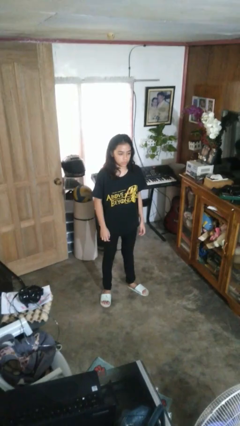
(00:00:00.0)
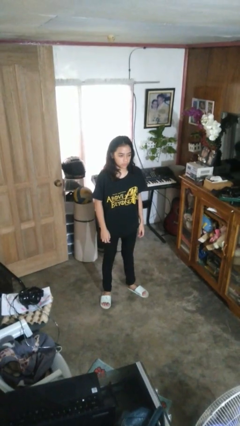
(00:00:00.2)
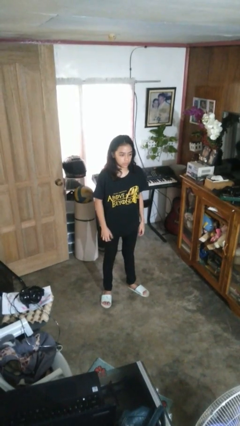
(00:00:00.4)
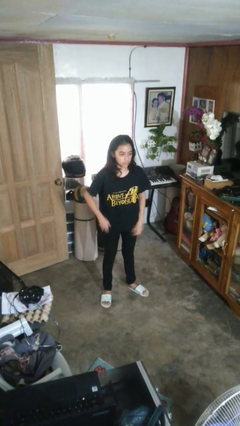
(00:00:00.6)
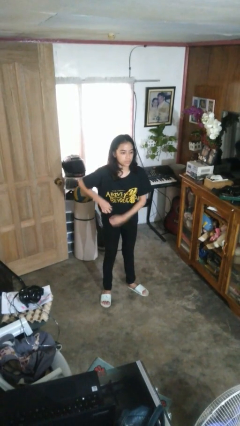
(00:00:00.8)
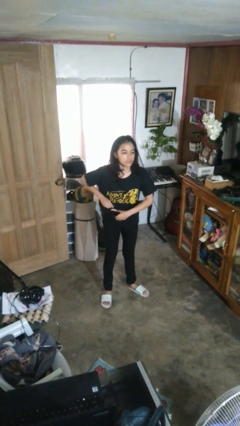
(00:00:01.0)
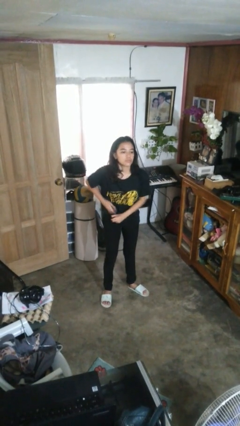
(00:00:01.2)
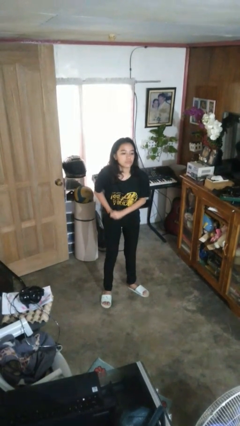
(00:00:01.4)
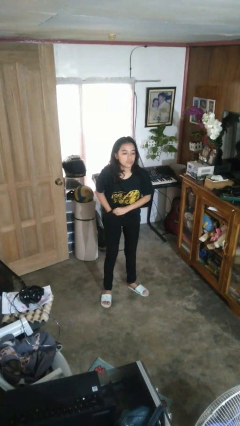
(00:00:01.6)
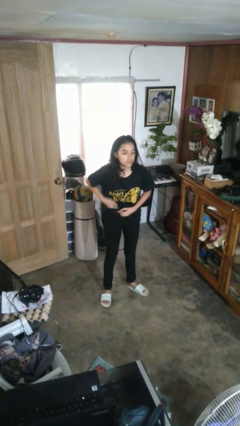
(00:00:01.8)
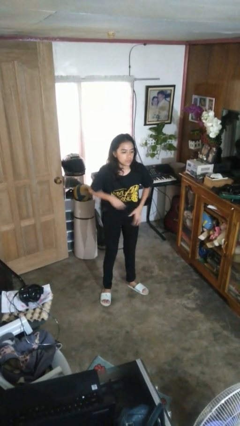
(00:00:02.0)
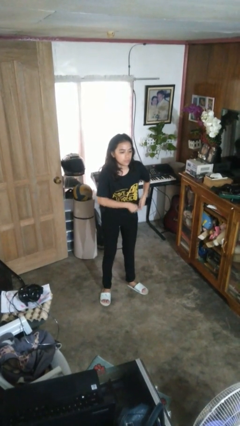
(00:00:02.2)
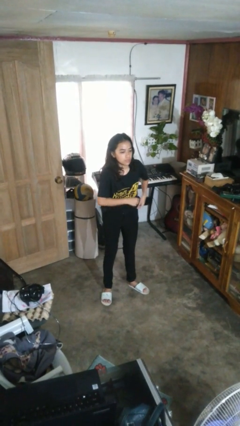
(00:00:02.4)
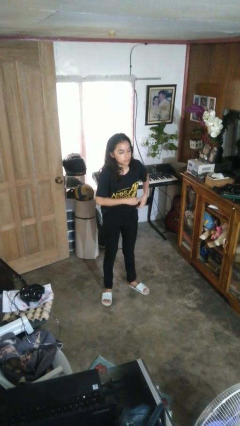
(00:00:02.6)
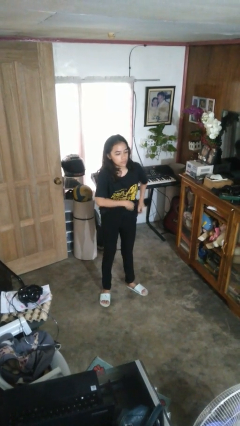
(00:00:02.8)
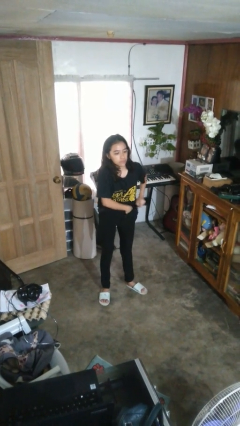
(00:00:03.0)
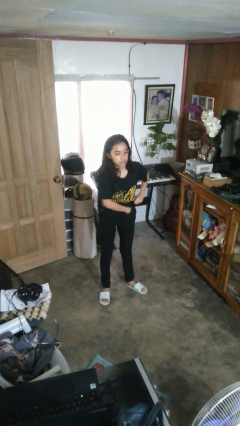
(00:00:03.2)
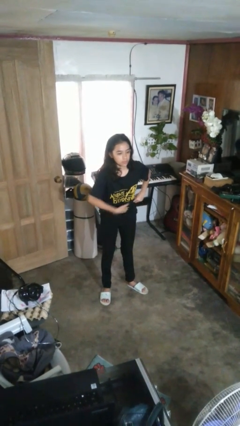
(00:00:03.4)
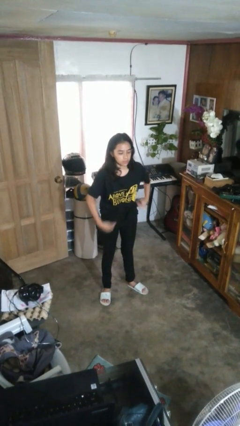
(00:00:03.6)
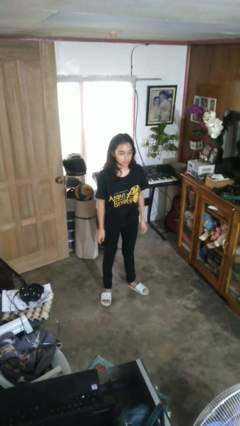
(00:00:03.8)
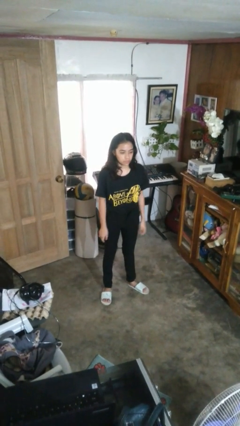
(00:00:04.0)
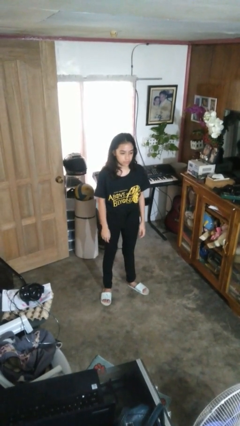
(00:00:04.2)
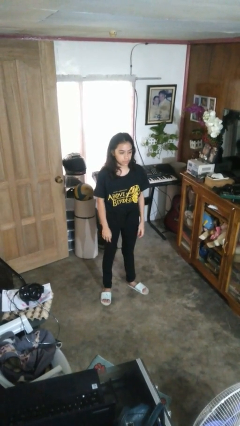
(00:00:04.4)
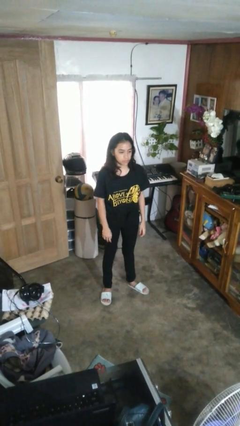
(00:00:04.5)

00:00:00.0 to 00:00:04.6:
person tucks in shirt

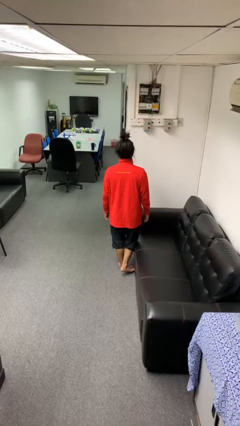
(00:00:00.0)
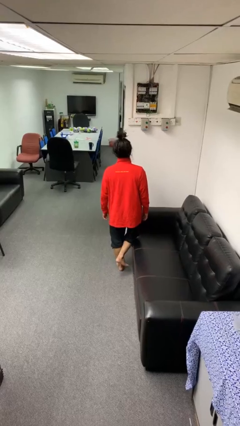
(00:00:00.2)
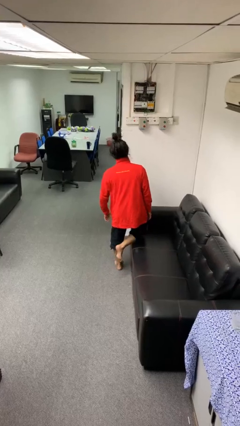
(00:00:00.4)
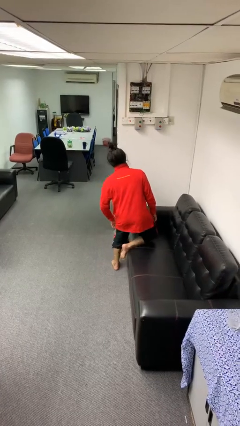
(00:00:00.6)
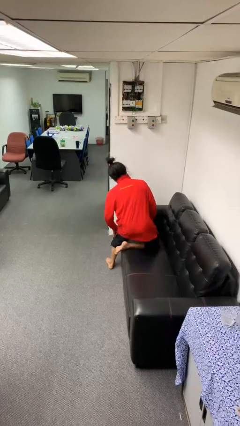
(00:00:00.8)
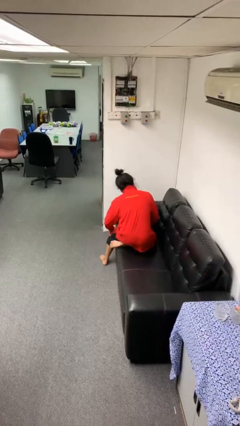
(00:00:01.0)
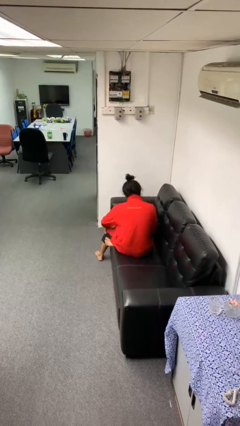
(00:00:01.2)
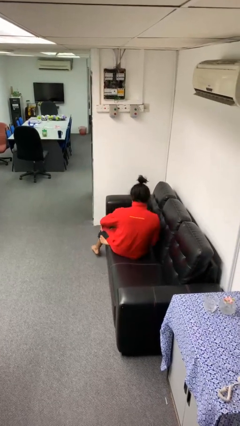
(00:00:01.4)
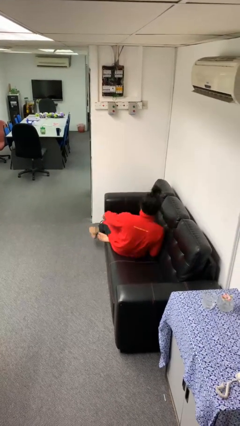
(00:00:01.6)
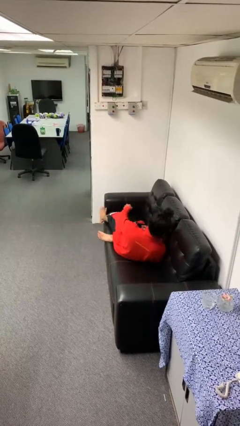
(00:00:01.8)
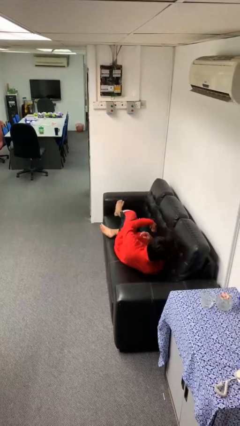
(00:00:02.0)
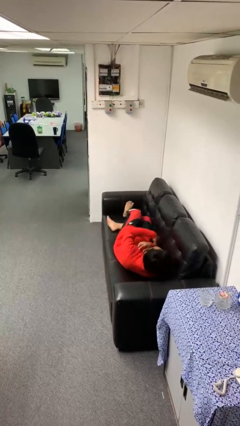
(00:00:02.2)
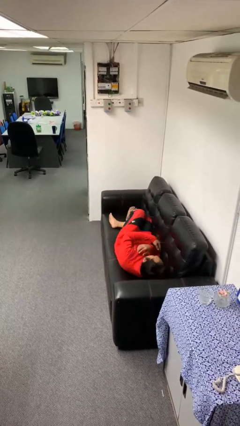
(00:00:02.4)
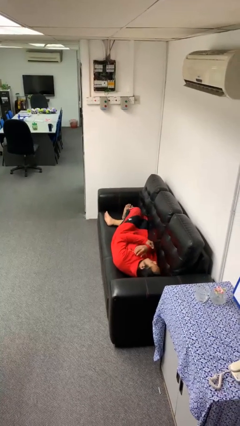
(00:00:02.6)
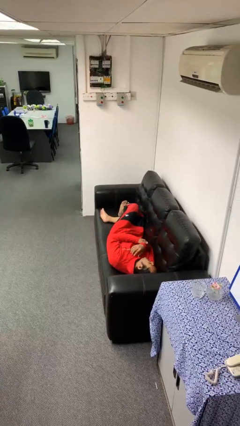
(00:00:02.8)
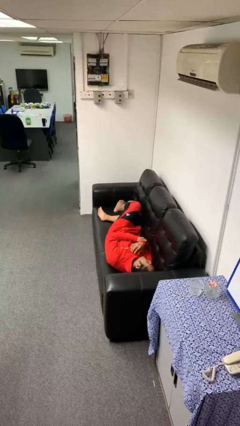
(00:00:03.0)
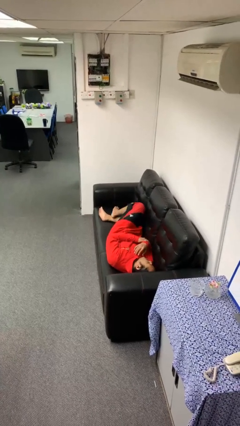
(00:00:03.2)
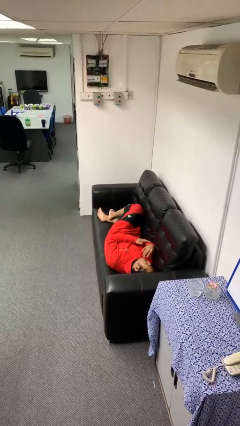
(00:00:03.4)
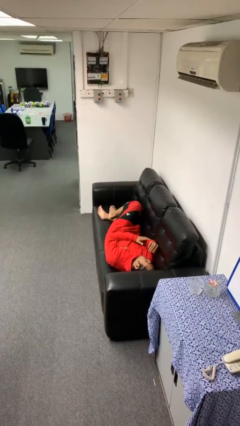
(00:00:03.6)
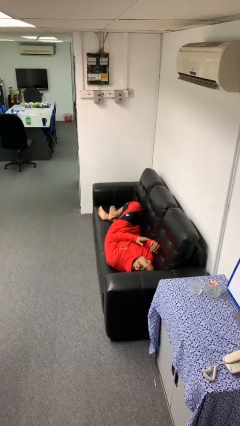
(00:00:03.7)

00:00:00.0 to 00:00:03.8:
person lies down on couch

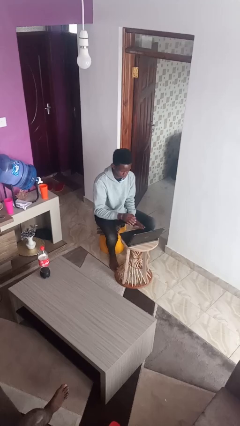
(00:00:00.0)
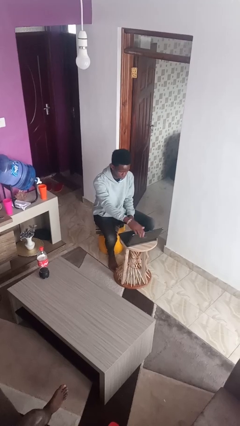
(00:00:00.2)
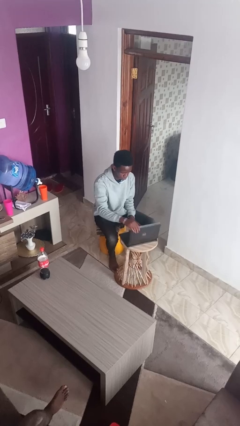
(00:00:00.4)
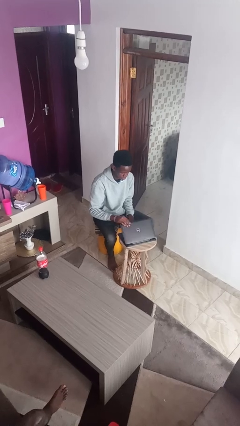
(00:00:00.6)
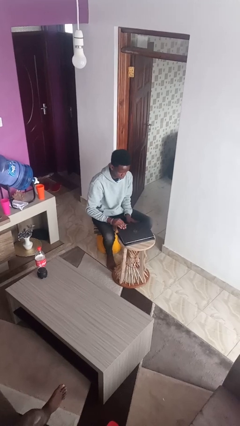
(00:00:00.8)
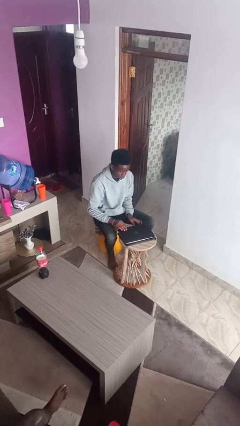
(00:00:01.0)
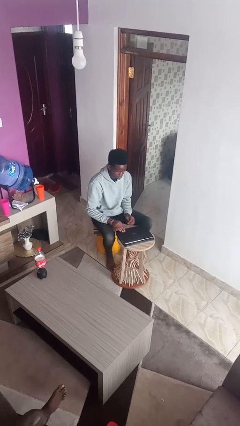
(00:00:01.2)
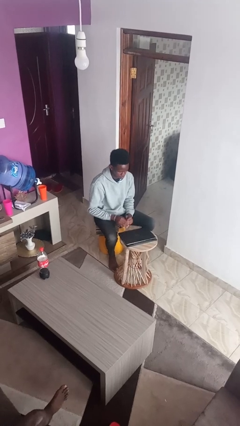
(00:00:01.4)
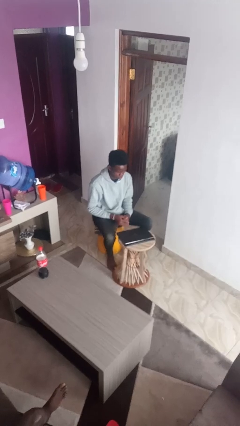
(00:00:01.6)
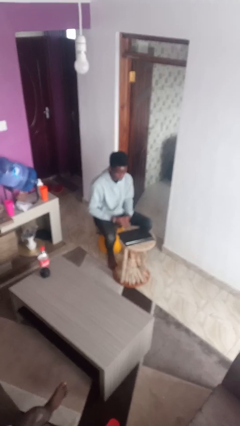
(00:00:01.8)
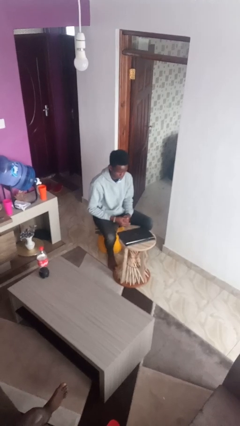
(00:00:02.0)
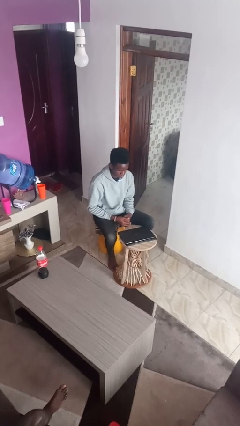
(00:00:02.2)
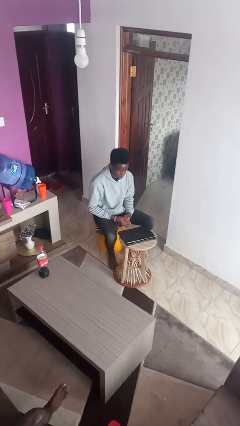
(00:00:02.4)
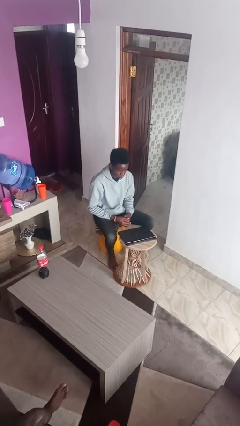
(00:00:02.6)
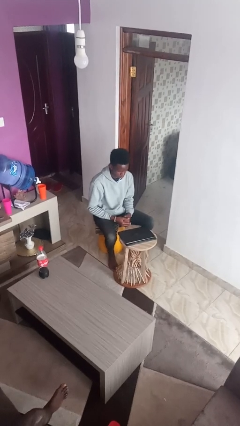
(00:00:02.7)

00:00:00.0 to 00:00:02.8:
person closes laptop

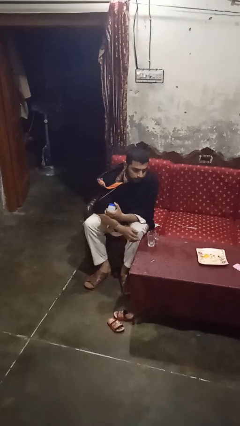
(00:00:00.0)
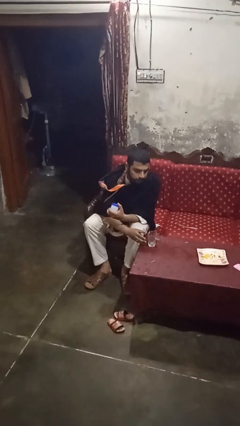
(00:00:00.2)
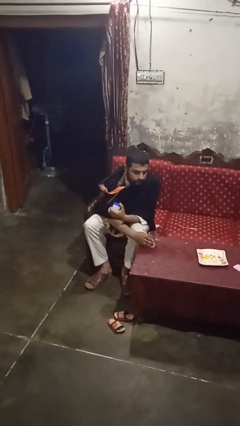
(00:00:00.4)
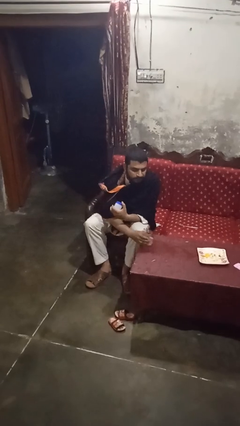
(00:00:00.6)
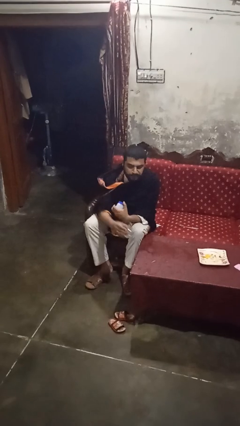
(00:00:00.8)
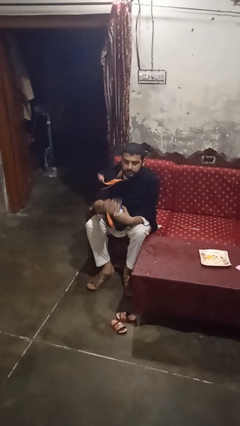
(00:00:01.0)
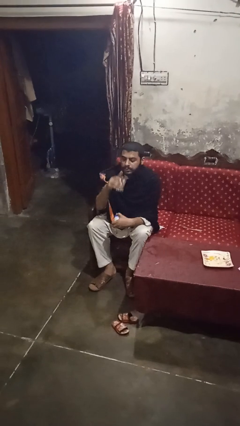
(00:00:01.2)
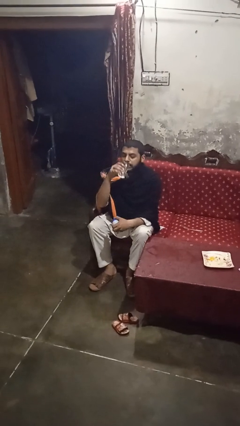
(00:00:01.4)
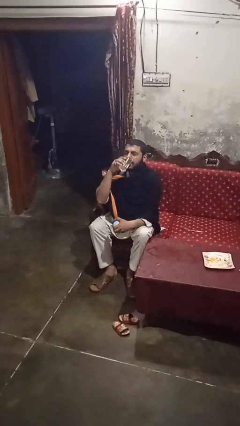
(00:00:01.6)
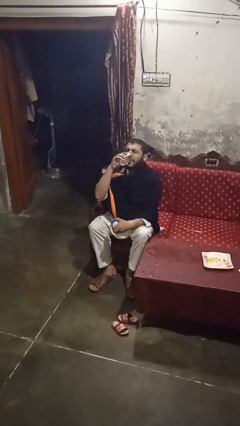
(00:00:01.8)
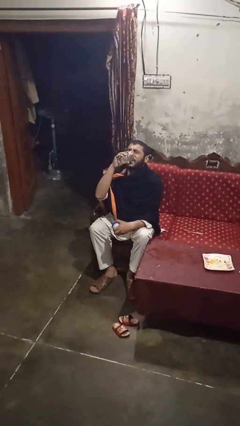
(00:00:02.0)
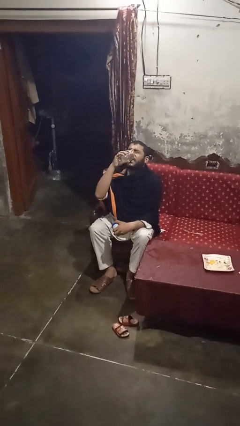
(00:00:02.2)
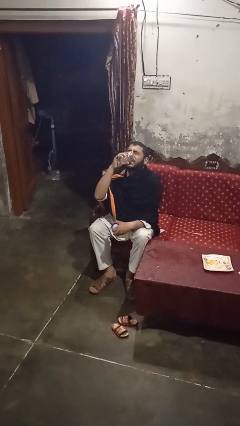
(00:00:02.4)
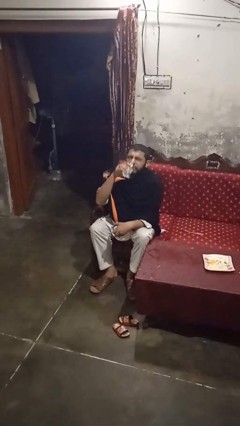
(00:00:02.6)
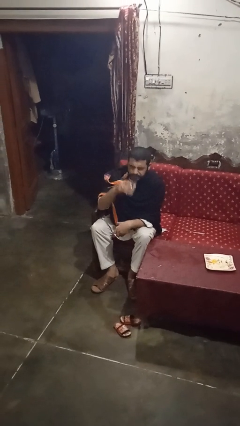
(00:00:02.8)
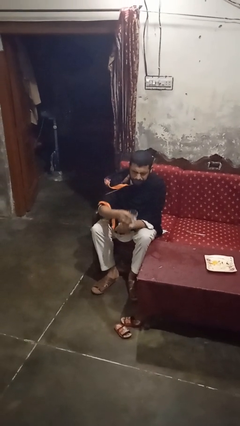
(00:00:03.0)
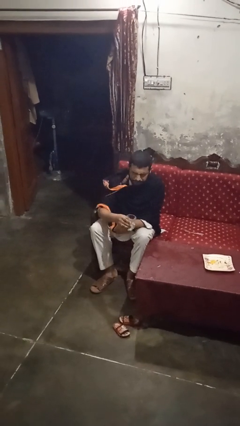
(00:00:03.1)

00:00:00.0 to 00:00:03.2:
person drinks from cup

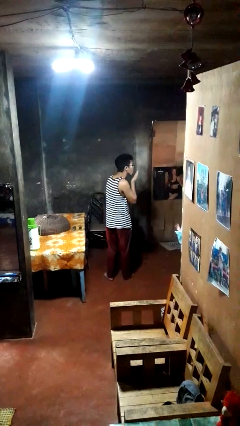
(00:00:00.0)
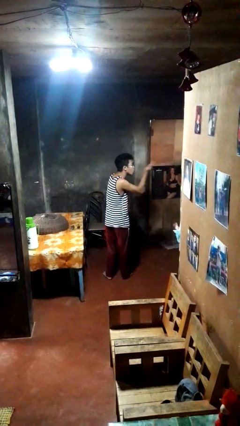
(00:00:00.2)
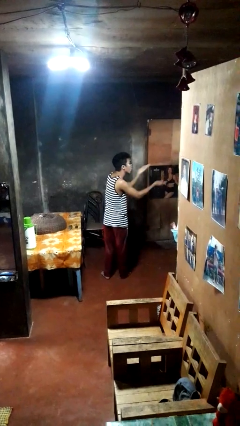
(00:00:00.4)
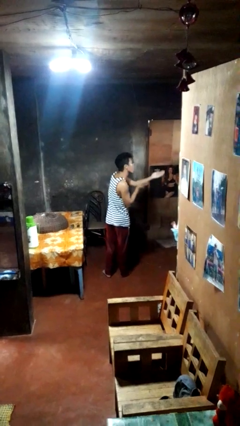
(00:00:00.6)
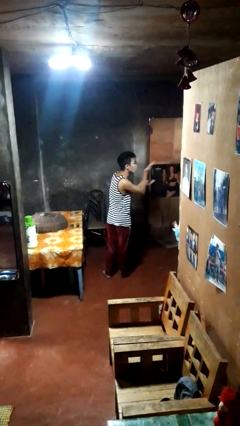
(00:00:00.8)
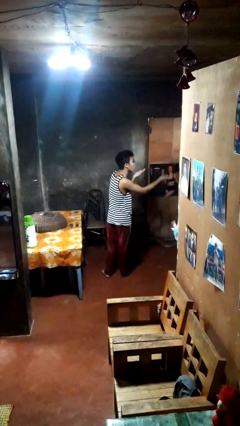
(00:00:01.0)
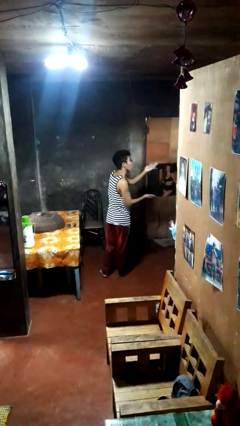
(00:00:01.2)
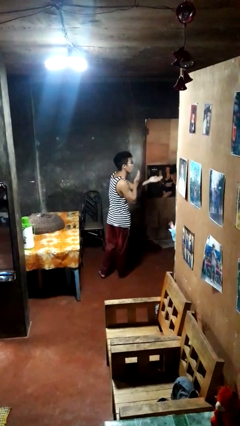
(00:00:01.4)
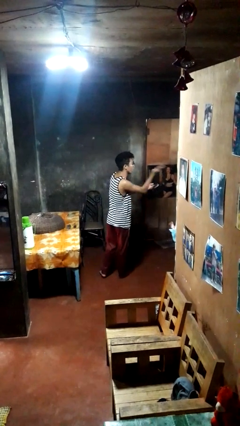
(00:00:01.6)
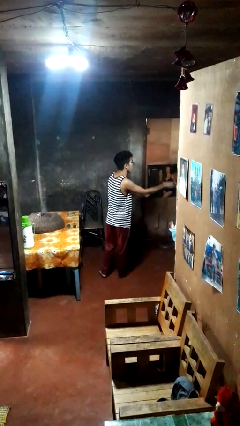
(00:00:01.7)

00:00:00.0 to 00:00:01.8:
person gestures blow kiss

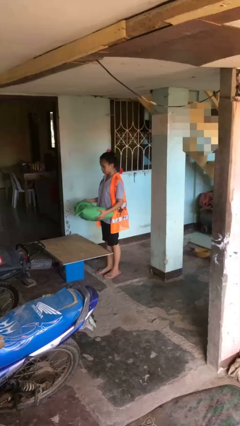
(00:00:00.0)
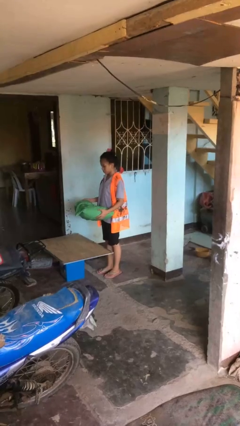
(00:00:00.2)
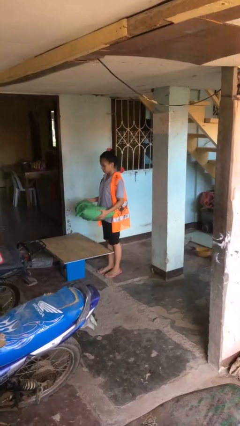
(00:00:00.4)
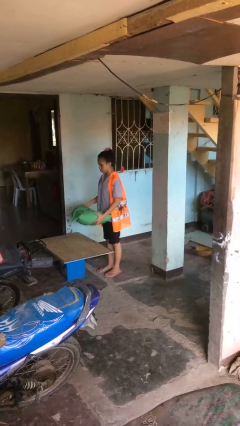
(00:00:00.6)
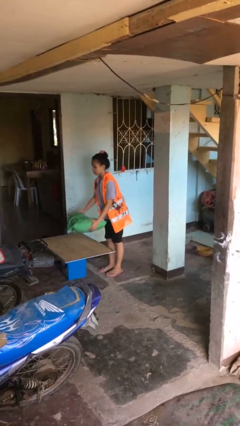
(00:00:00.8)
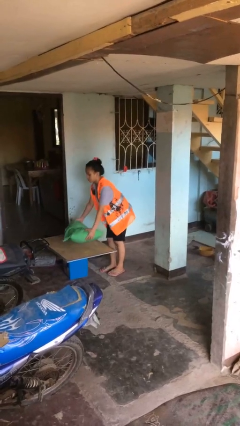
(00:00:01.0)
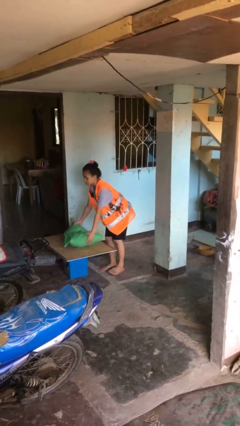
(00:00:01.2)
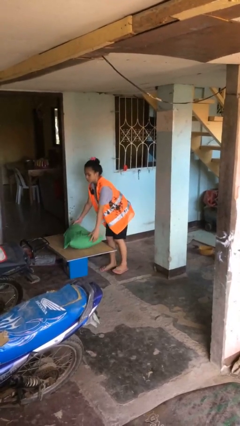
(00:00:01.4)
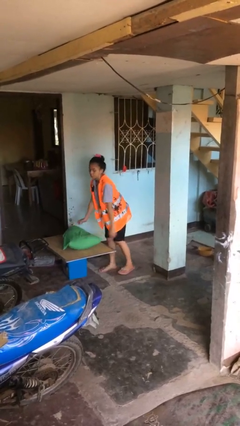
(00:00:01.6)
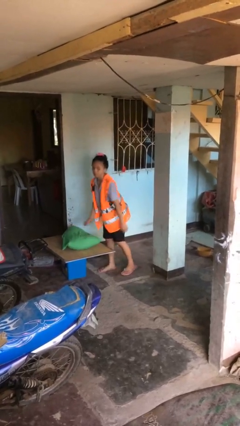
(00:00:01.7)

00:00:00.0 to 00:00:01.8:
person puts down object on table
